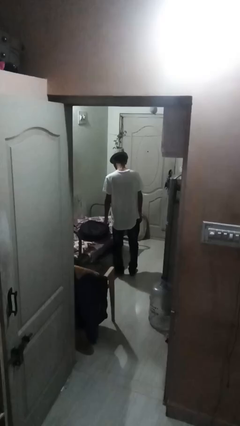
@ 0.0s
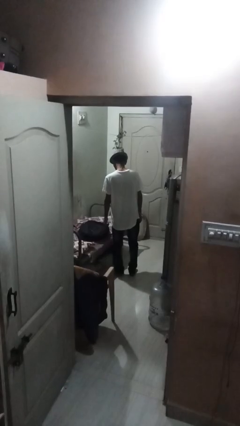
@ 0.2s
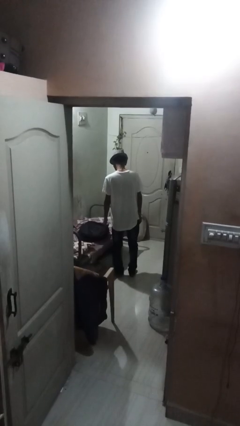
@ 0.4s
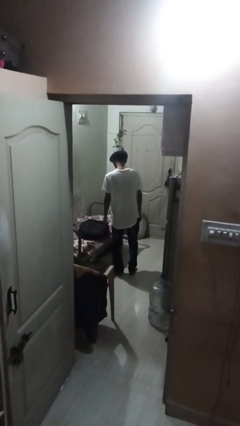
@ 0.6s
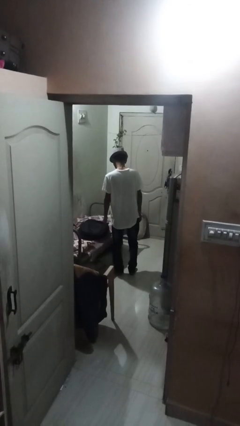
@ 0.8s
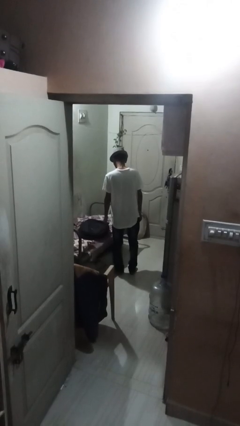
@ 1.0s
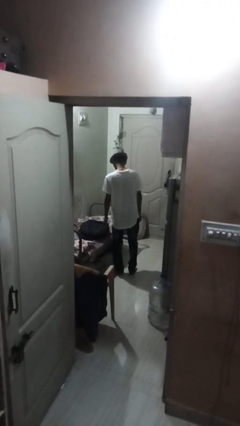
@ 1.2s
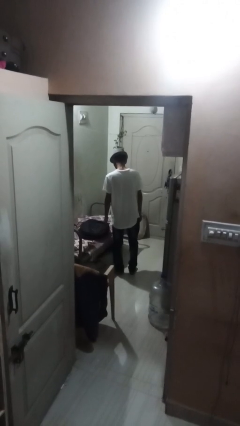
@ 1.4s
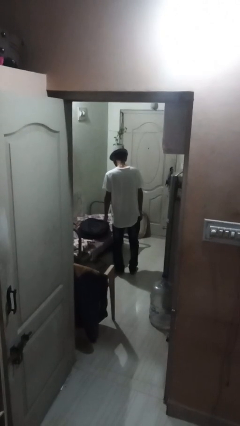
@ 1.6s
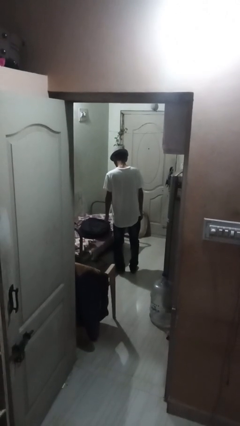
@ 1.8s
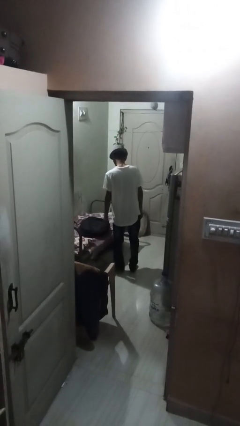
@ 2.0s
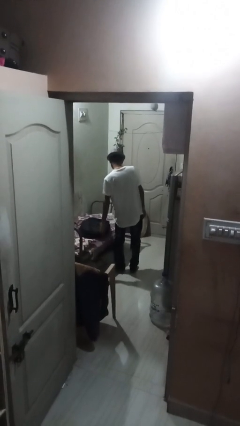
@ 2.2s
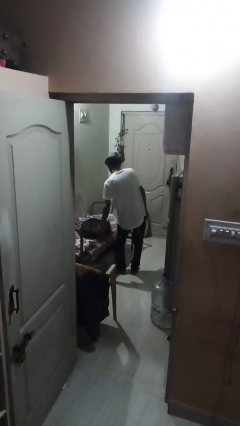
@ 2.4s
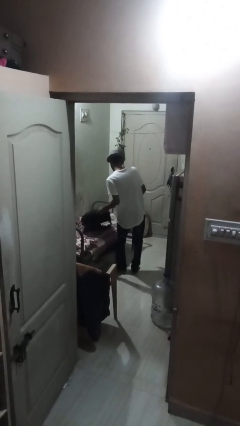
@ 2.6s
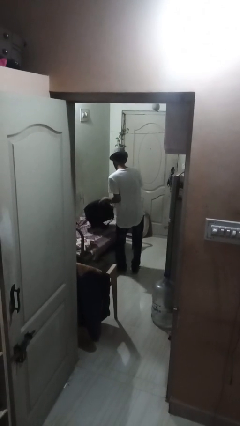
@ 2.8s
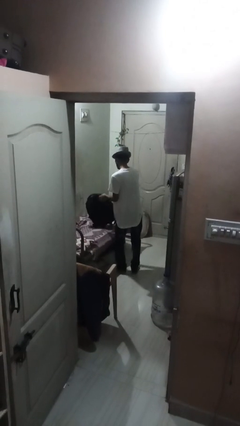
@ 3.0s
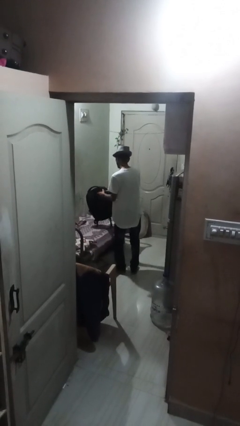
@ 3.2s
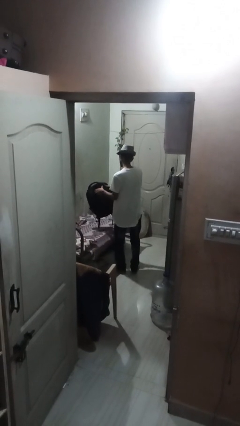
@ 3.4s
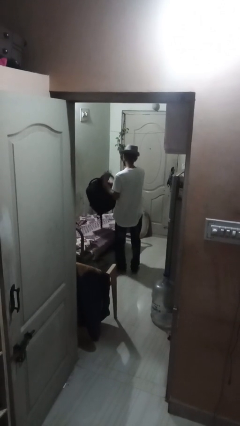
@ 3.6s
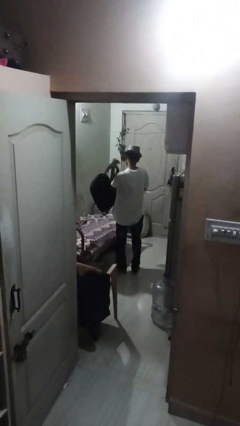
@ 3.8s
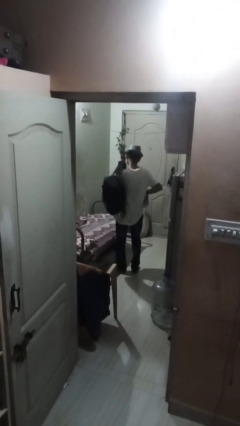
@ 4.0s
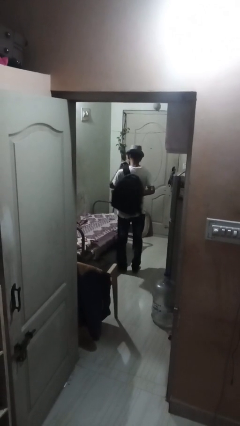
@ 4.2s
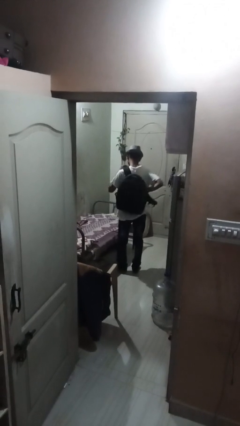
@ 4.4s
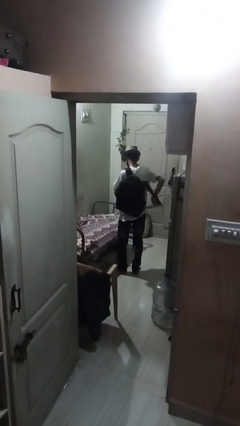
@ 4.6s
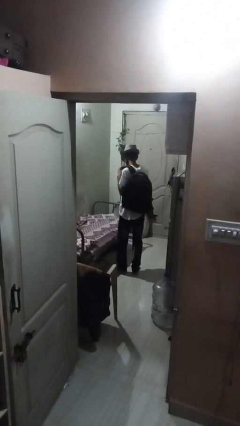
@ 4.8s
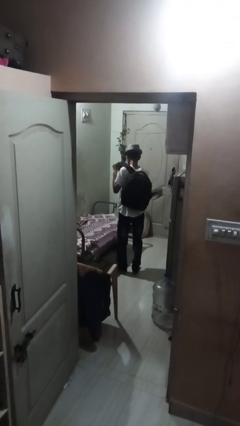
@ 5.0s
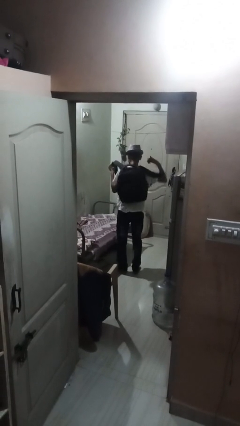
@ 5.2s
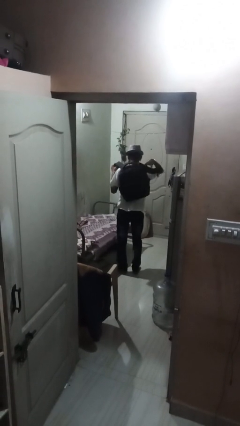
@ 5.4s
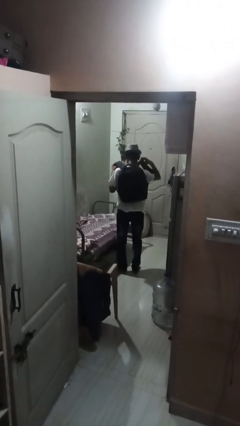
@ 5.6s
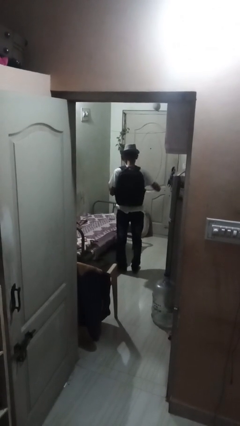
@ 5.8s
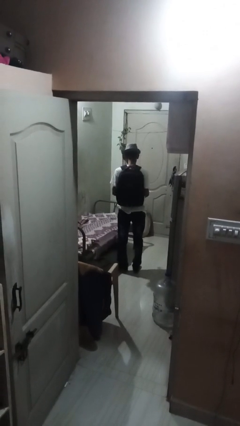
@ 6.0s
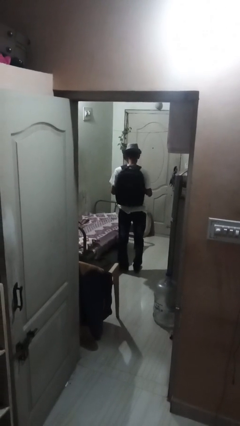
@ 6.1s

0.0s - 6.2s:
person puts on backpack

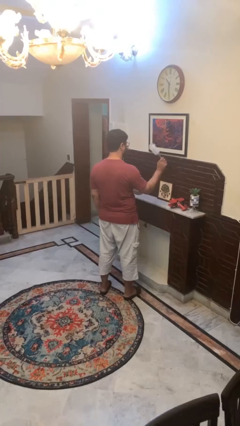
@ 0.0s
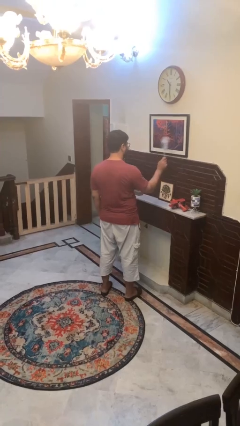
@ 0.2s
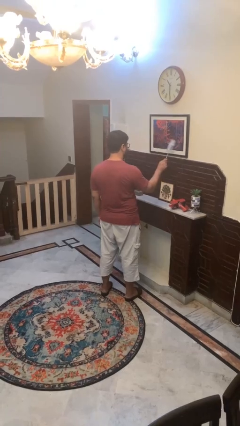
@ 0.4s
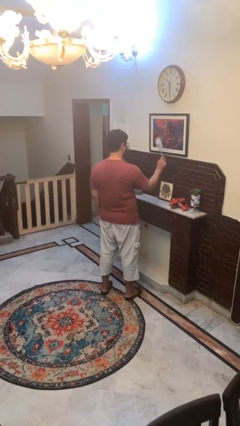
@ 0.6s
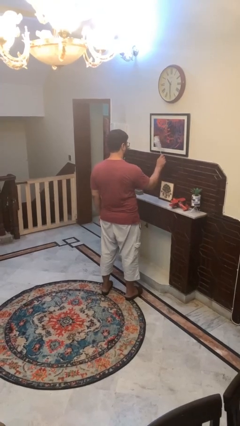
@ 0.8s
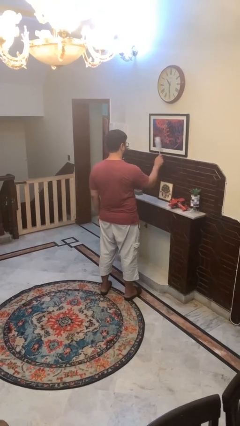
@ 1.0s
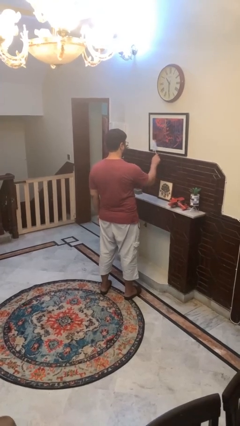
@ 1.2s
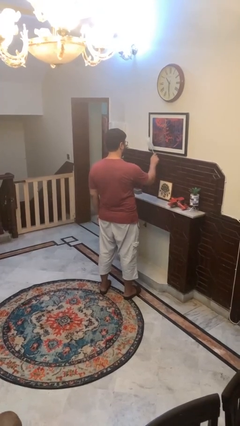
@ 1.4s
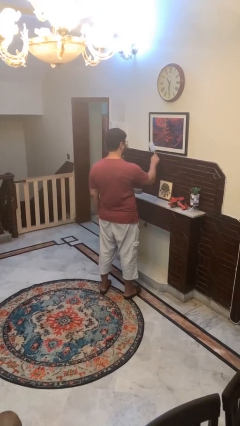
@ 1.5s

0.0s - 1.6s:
person dusts furniture

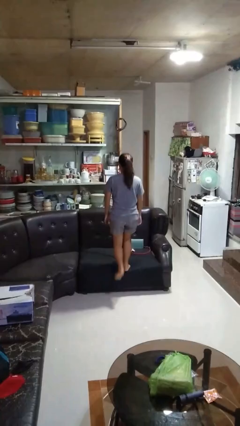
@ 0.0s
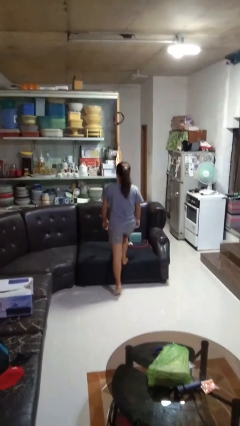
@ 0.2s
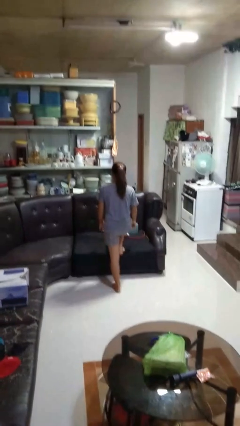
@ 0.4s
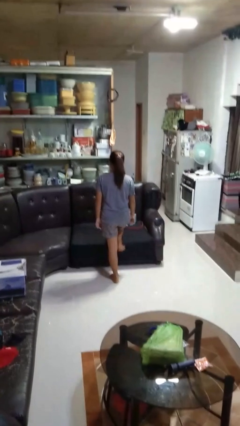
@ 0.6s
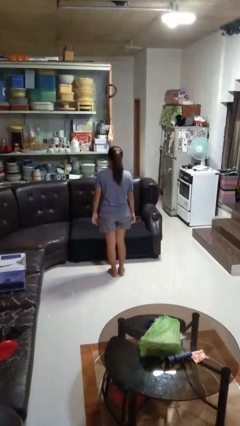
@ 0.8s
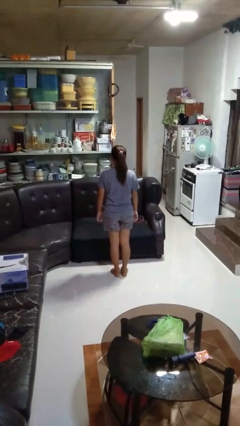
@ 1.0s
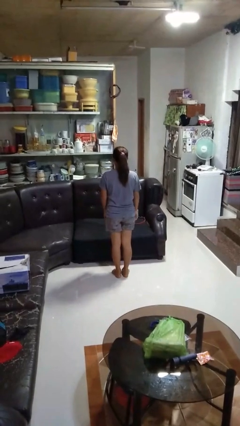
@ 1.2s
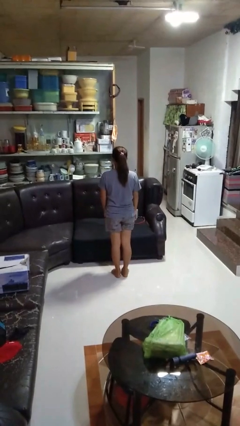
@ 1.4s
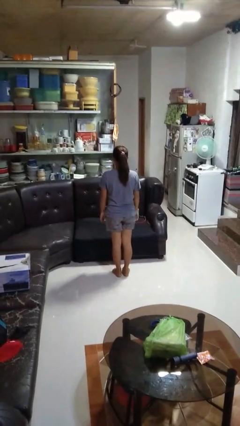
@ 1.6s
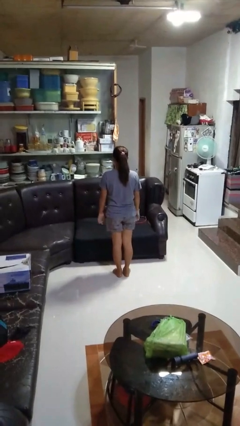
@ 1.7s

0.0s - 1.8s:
person climbs off couch

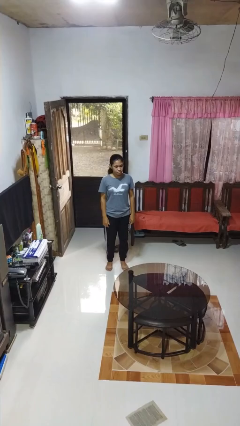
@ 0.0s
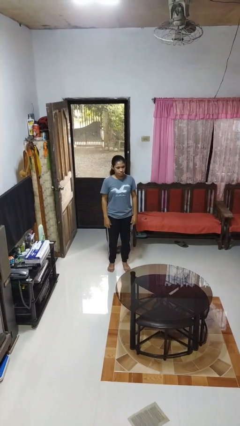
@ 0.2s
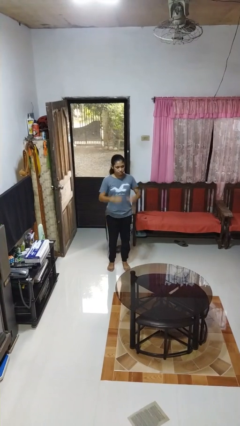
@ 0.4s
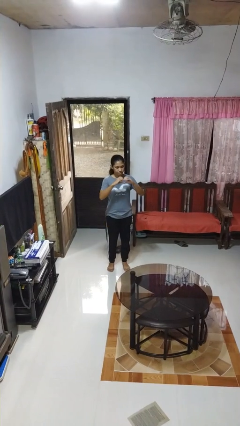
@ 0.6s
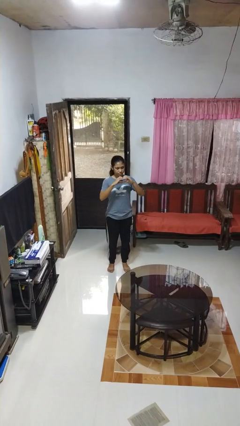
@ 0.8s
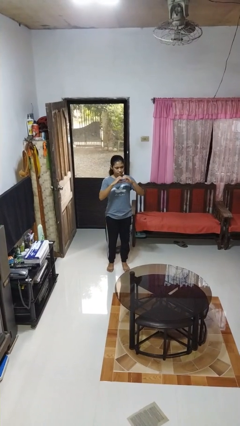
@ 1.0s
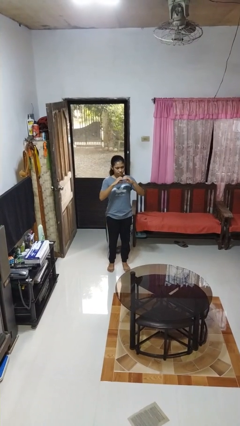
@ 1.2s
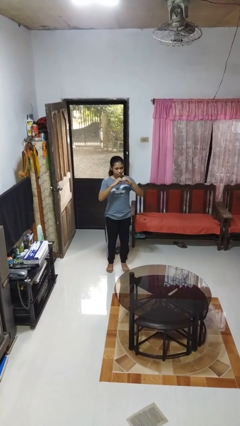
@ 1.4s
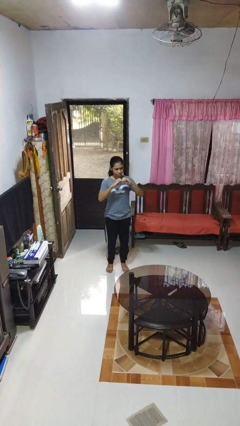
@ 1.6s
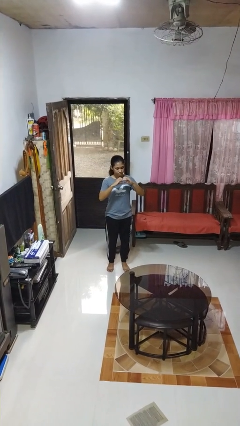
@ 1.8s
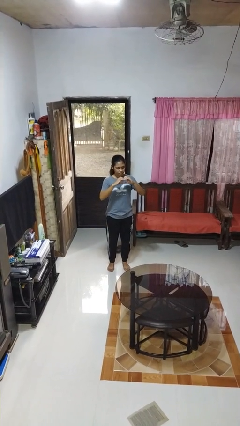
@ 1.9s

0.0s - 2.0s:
person gestures heart

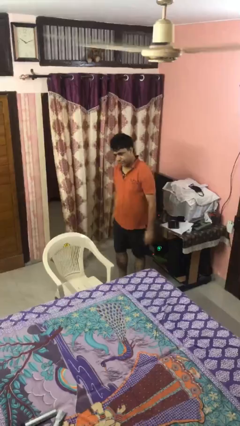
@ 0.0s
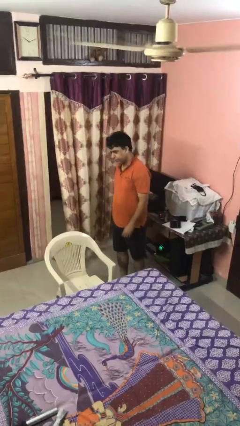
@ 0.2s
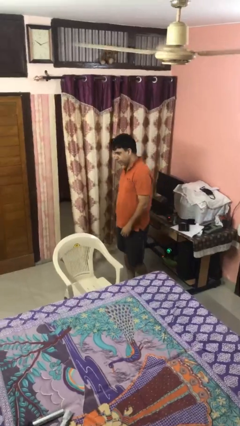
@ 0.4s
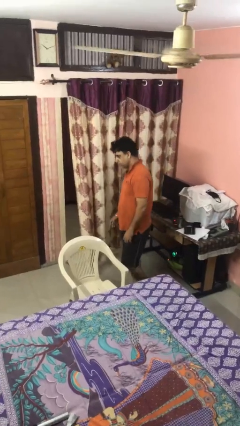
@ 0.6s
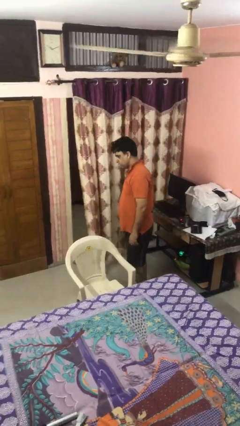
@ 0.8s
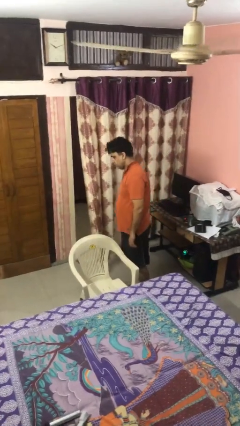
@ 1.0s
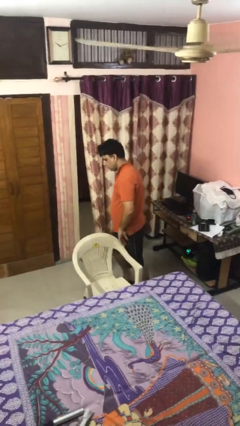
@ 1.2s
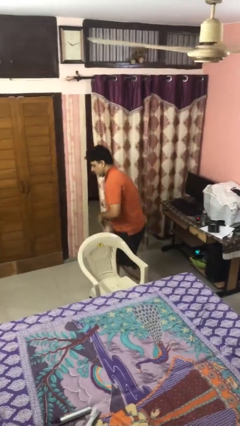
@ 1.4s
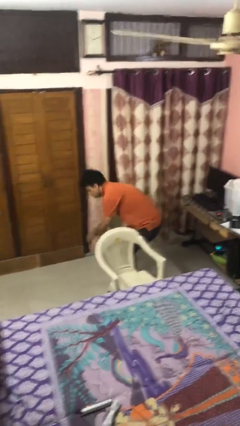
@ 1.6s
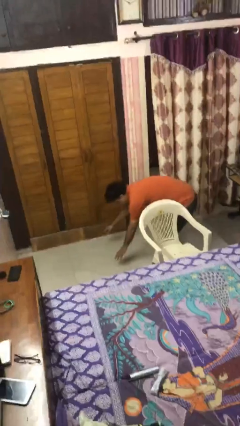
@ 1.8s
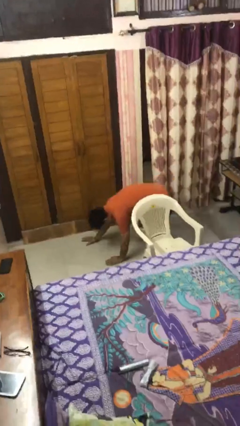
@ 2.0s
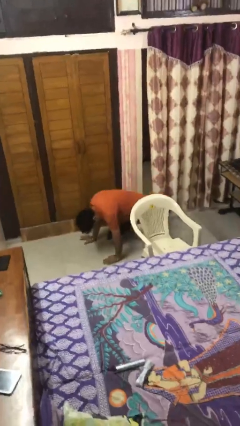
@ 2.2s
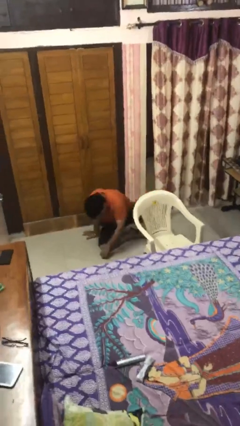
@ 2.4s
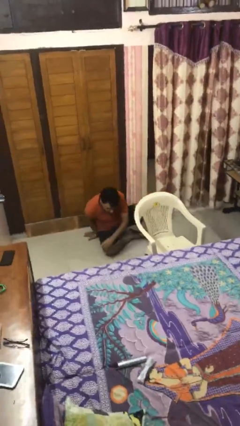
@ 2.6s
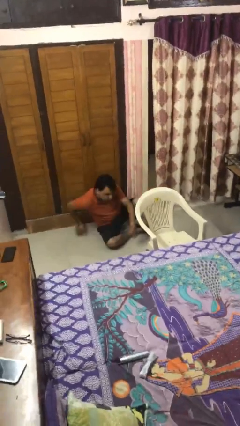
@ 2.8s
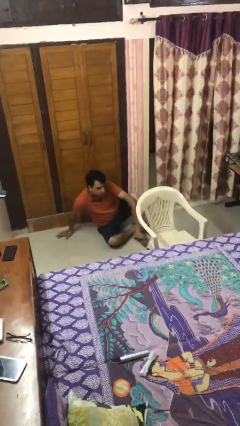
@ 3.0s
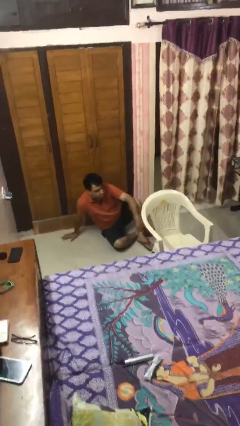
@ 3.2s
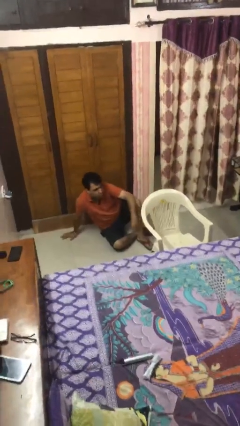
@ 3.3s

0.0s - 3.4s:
person trips on object on floor

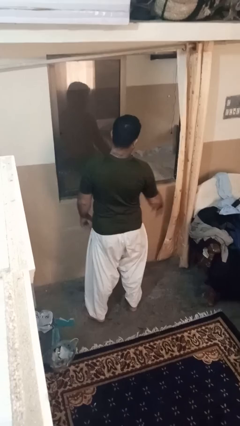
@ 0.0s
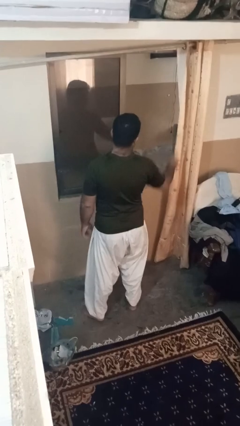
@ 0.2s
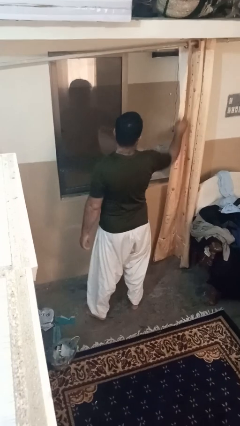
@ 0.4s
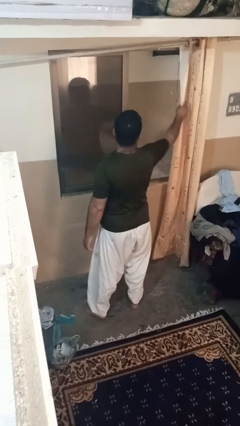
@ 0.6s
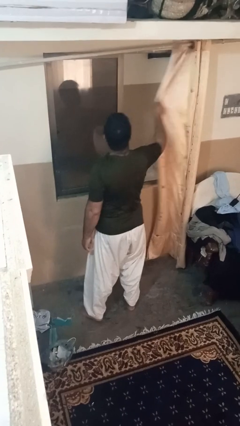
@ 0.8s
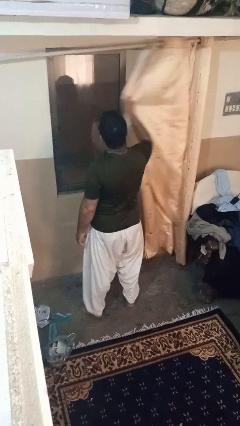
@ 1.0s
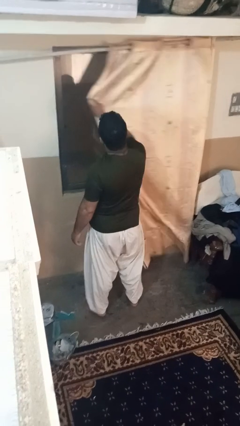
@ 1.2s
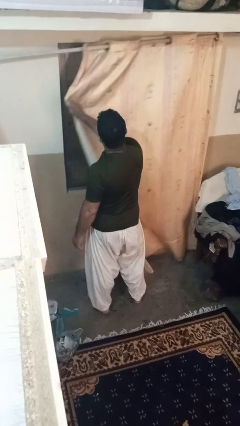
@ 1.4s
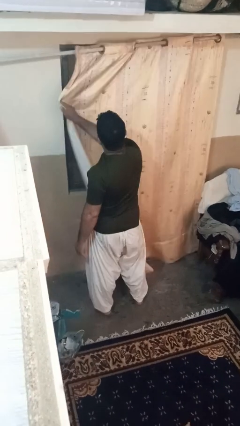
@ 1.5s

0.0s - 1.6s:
person closes curtains

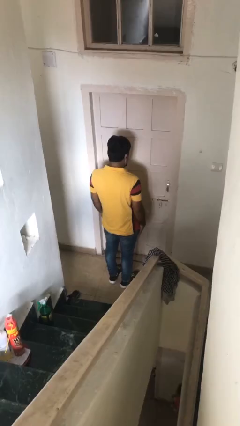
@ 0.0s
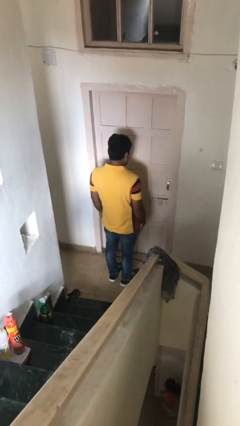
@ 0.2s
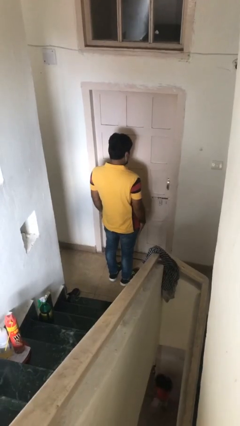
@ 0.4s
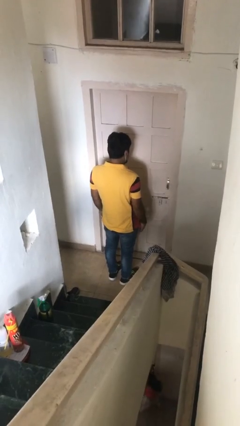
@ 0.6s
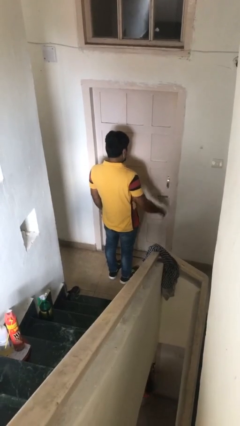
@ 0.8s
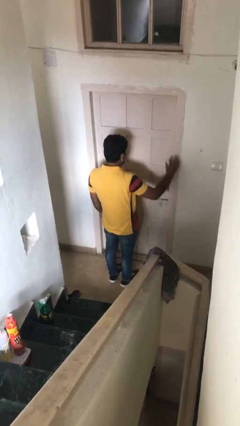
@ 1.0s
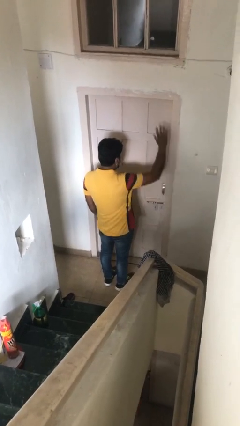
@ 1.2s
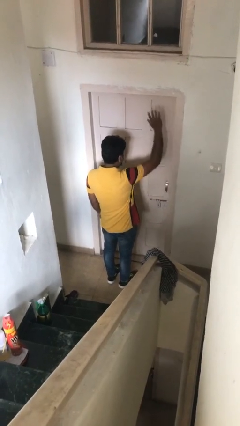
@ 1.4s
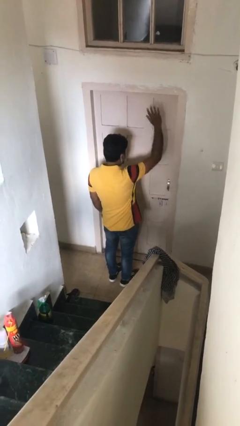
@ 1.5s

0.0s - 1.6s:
person gestures raise hand
